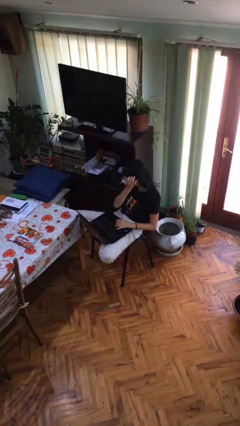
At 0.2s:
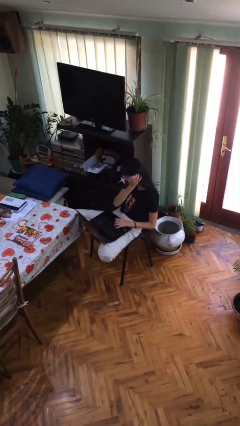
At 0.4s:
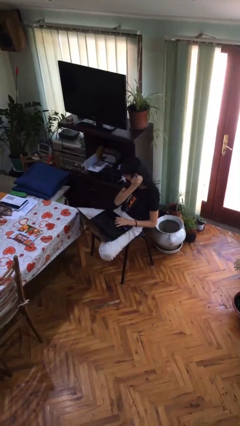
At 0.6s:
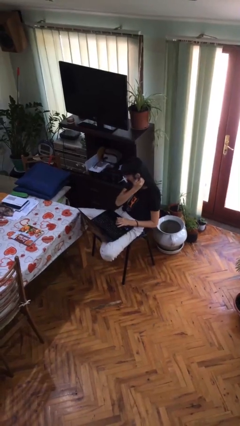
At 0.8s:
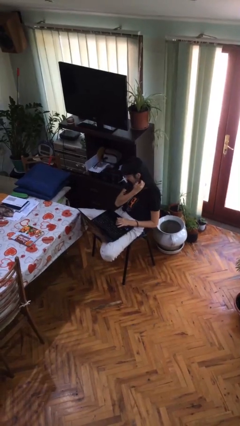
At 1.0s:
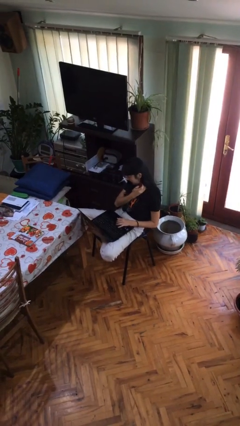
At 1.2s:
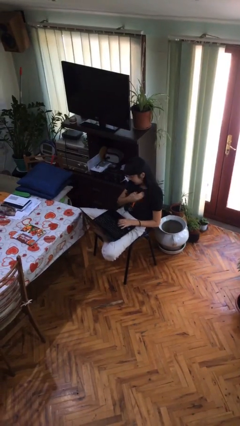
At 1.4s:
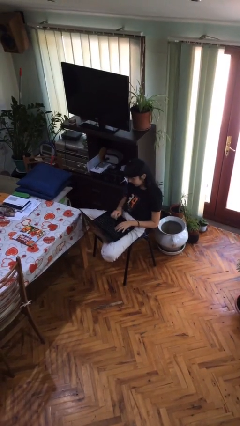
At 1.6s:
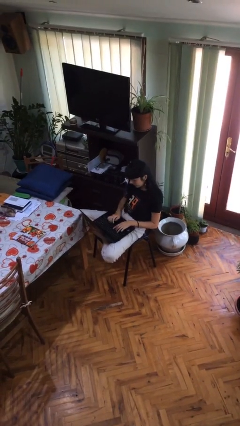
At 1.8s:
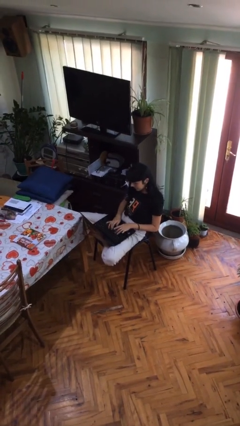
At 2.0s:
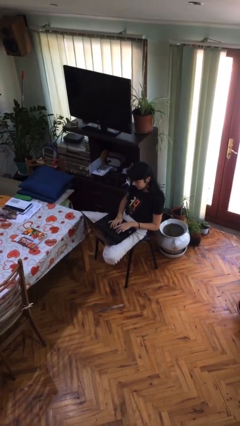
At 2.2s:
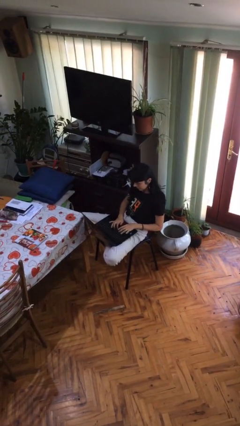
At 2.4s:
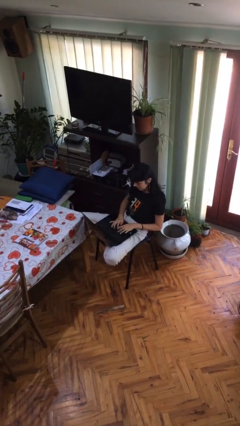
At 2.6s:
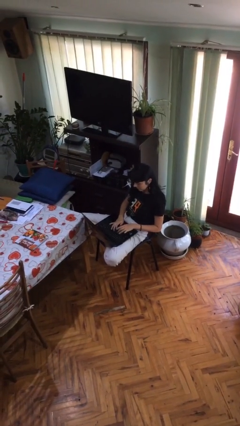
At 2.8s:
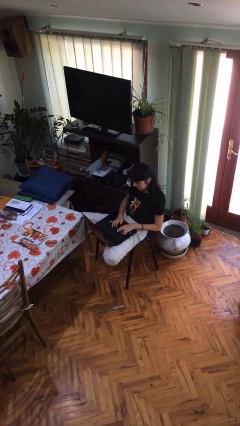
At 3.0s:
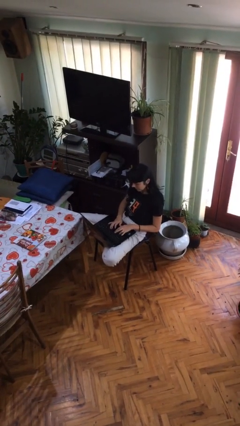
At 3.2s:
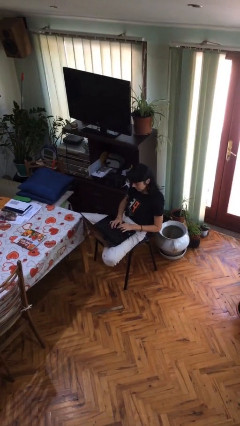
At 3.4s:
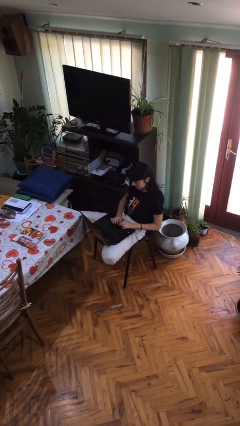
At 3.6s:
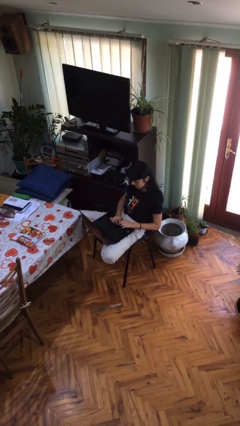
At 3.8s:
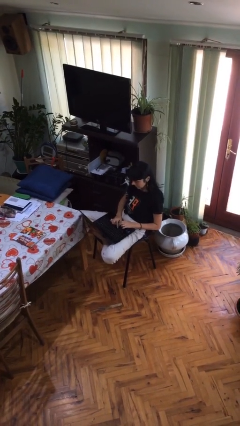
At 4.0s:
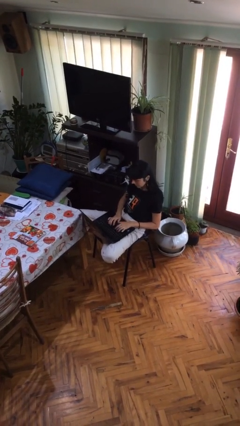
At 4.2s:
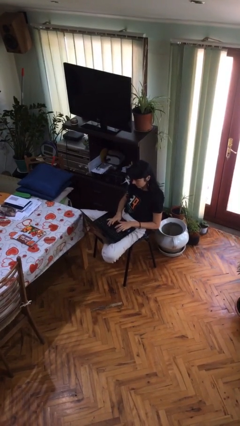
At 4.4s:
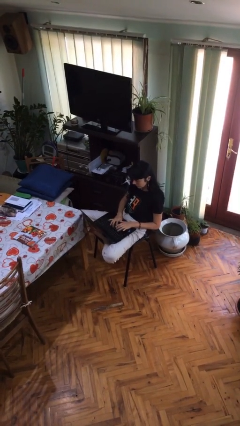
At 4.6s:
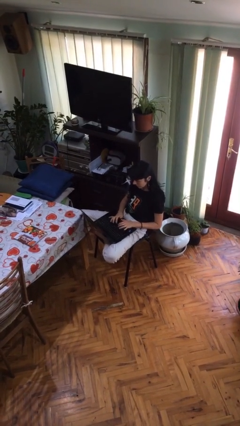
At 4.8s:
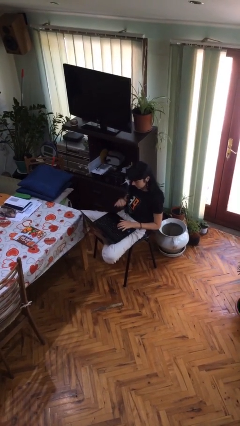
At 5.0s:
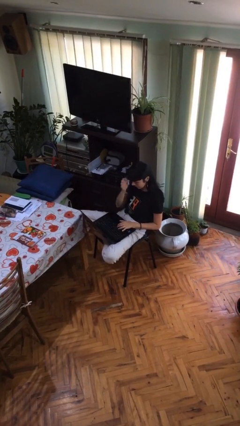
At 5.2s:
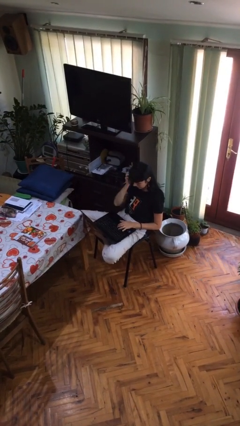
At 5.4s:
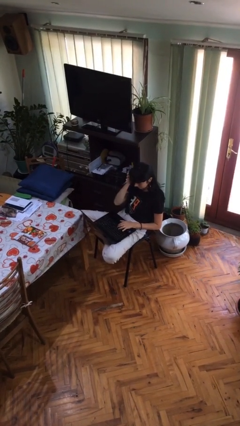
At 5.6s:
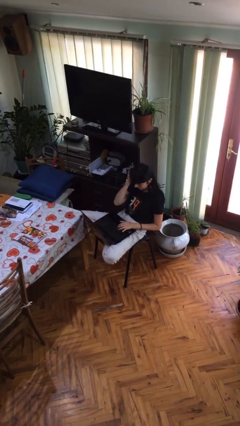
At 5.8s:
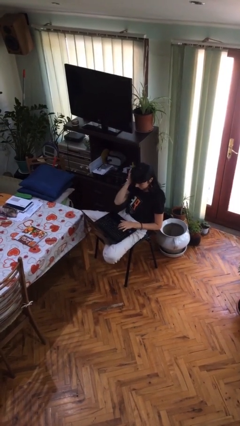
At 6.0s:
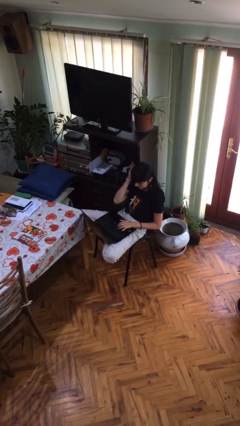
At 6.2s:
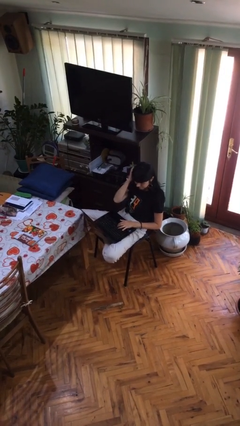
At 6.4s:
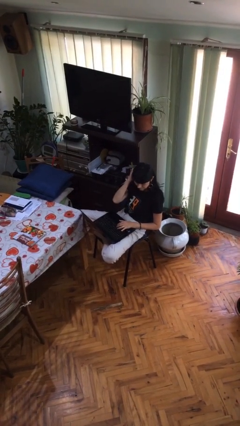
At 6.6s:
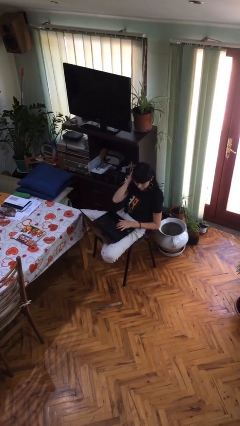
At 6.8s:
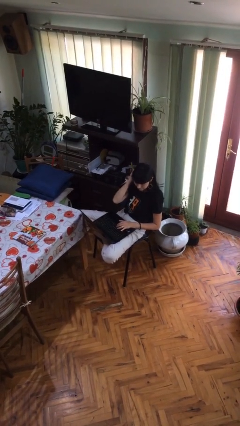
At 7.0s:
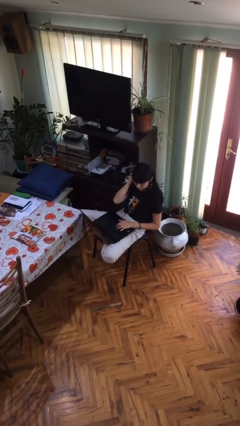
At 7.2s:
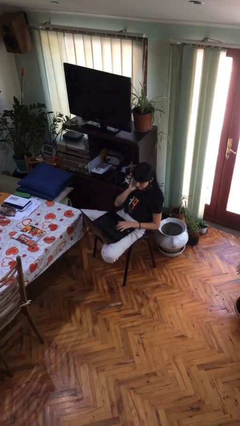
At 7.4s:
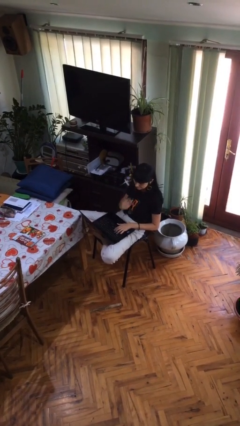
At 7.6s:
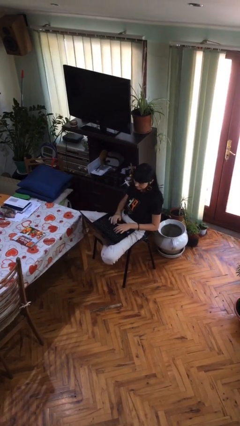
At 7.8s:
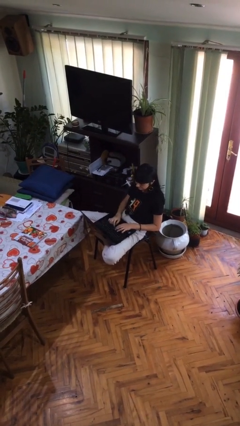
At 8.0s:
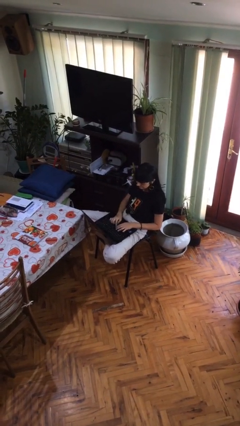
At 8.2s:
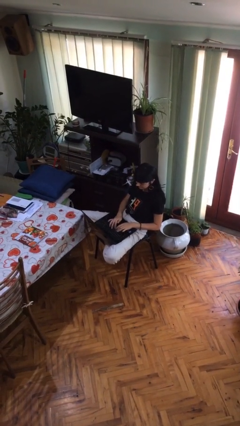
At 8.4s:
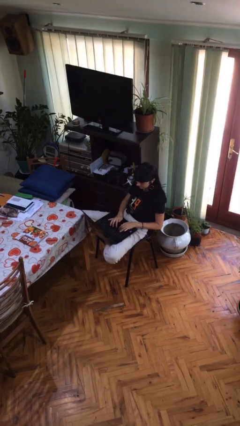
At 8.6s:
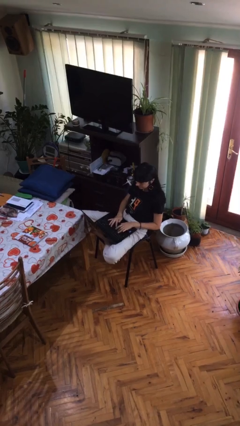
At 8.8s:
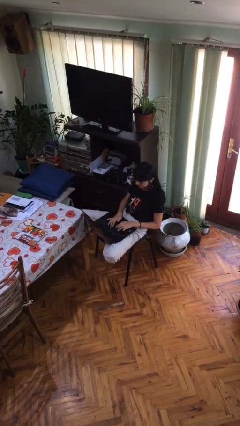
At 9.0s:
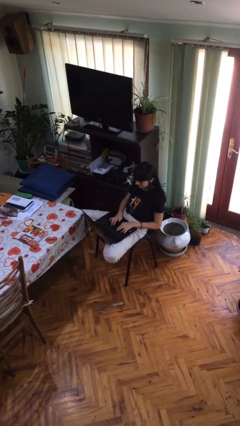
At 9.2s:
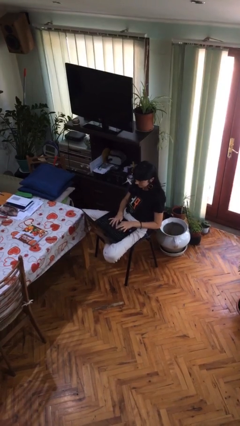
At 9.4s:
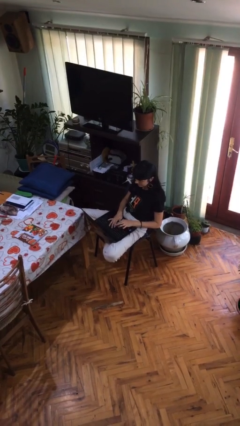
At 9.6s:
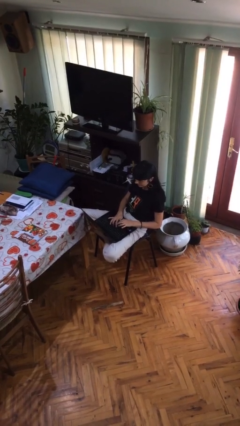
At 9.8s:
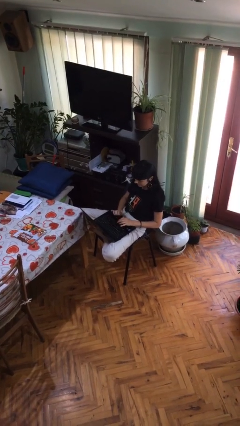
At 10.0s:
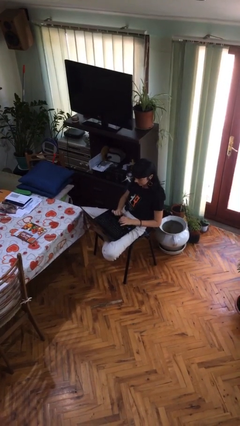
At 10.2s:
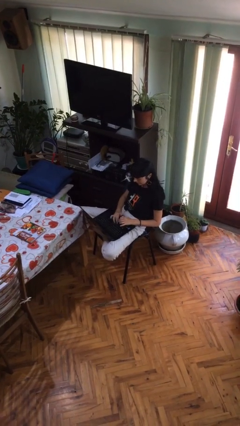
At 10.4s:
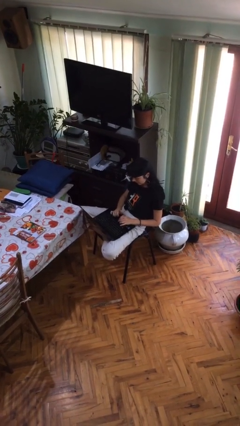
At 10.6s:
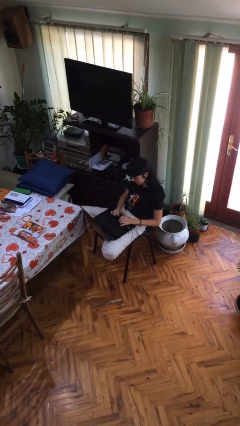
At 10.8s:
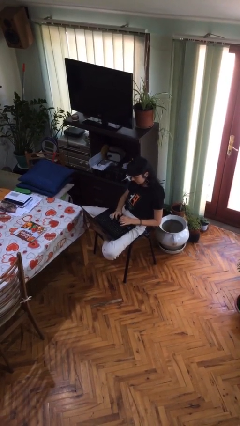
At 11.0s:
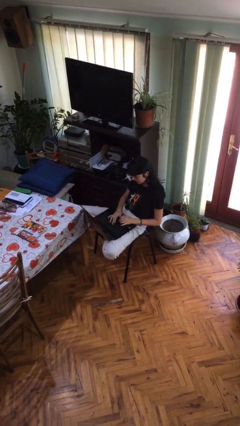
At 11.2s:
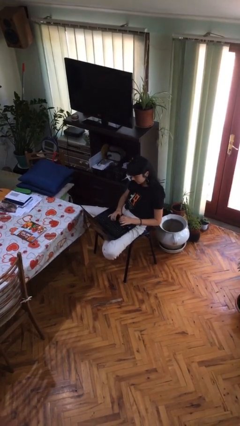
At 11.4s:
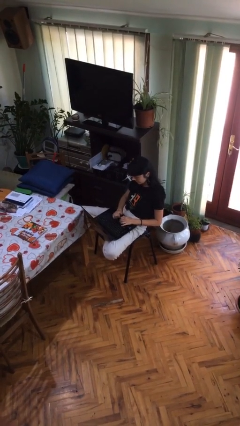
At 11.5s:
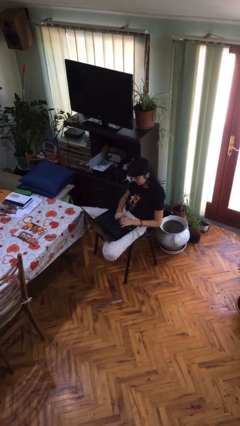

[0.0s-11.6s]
person interacts with laptop

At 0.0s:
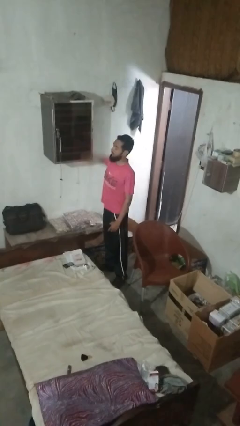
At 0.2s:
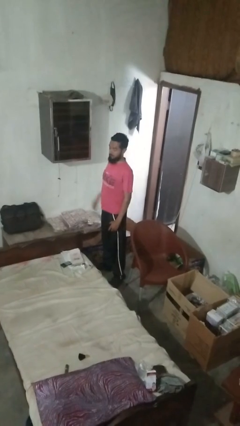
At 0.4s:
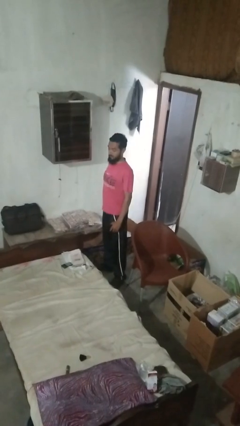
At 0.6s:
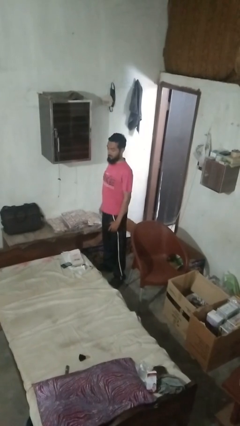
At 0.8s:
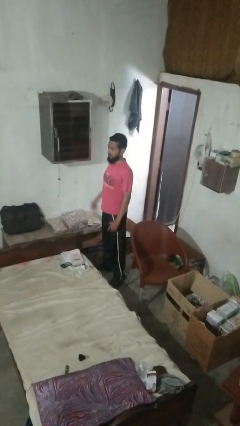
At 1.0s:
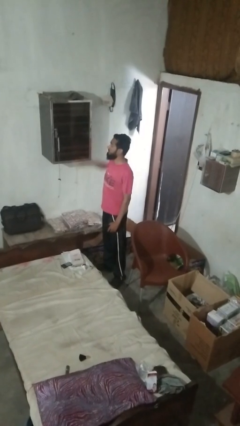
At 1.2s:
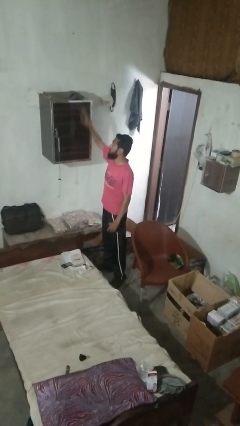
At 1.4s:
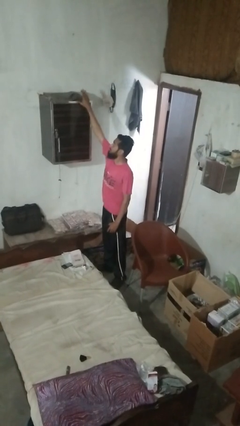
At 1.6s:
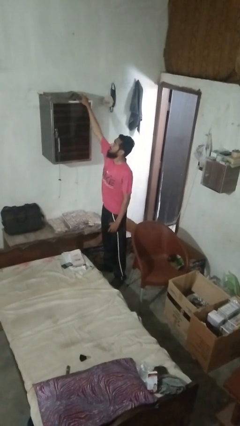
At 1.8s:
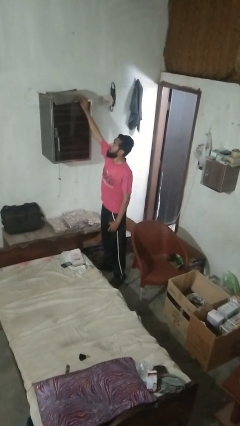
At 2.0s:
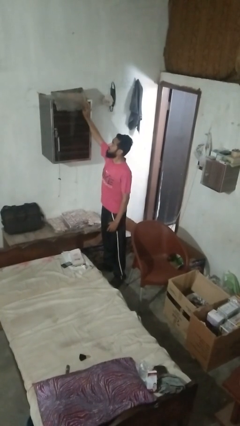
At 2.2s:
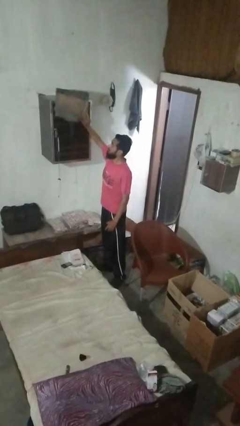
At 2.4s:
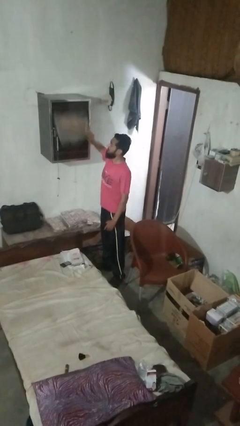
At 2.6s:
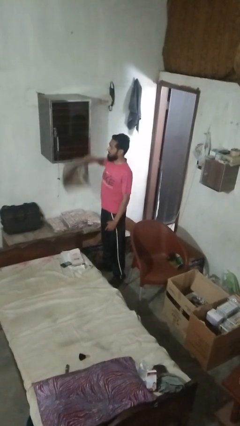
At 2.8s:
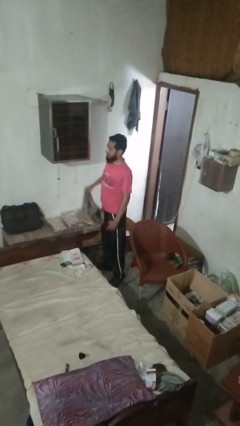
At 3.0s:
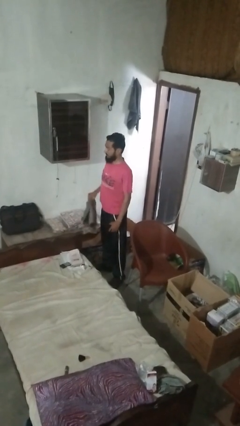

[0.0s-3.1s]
person picks up object from shelf

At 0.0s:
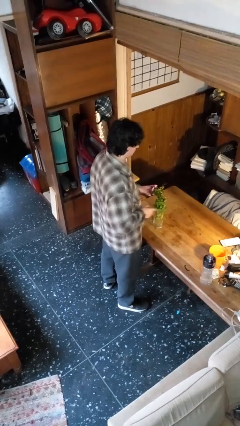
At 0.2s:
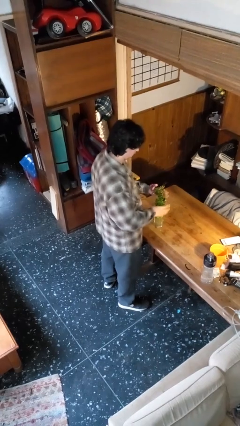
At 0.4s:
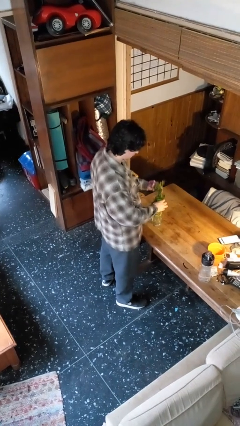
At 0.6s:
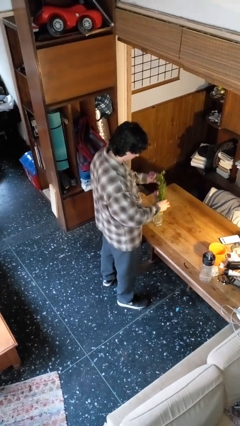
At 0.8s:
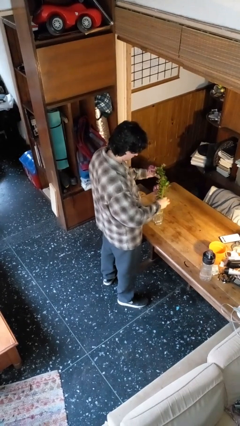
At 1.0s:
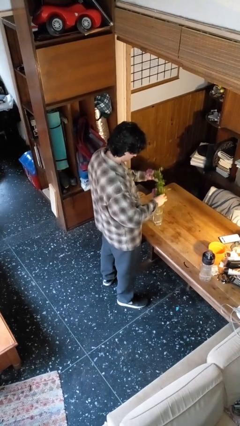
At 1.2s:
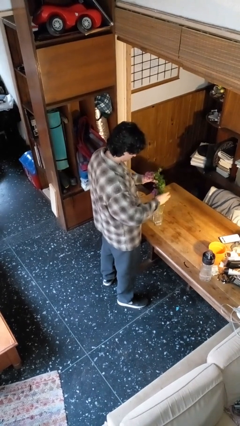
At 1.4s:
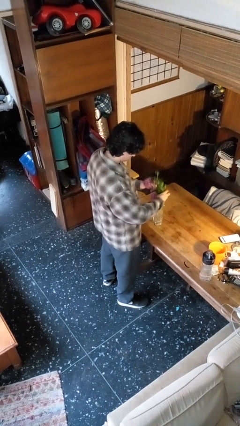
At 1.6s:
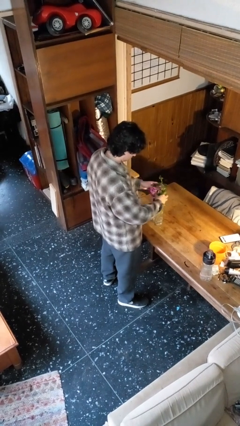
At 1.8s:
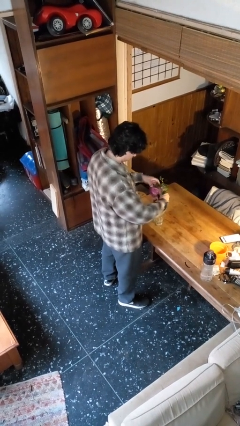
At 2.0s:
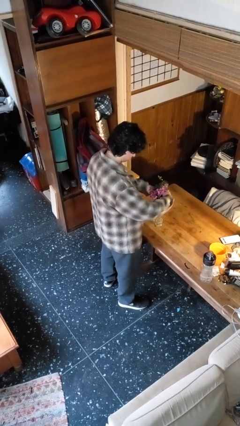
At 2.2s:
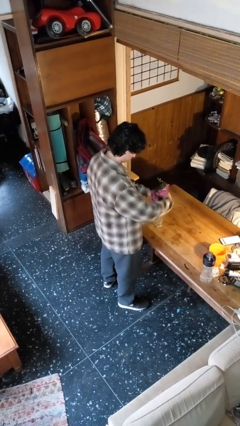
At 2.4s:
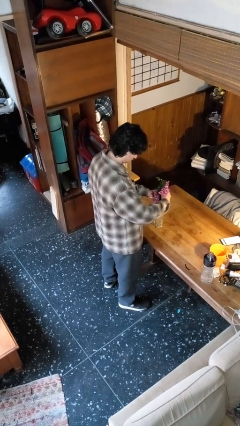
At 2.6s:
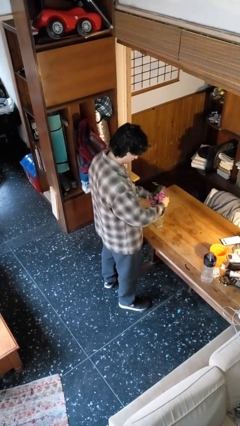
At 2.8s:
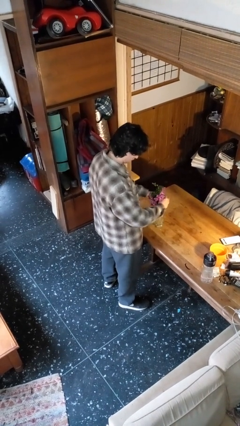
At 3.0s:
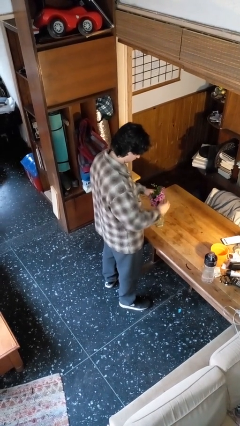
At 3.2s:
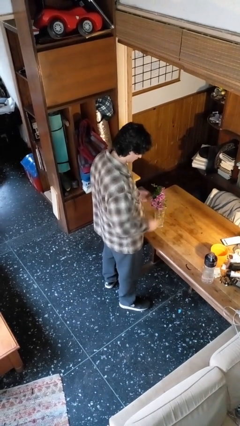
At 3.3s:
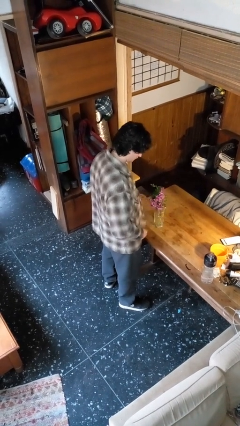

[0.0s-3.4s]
person arranges flowers in vase
